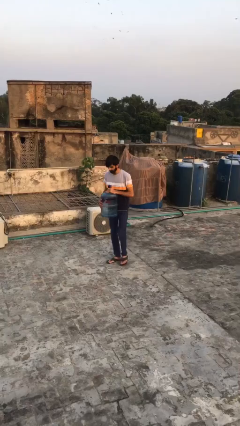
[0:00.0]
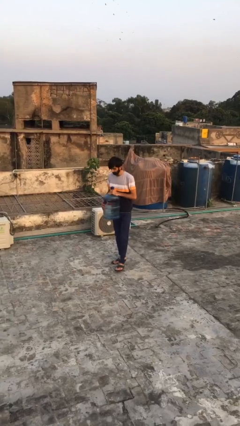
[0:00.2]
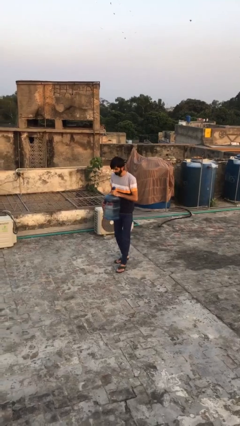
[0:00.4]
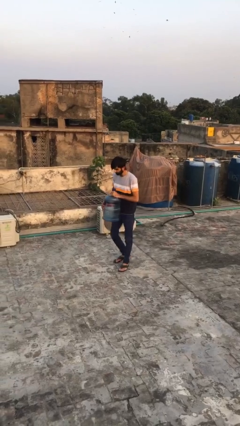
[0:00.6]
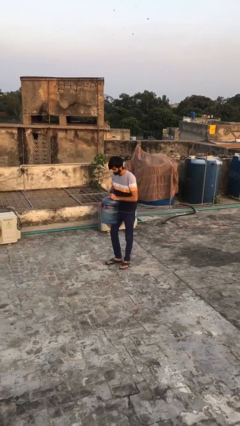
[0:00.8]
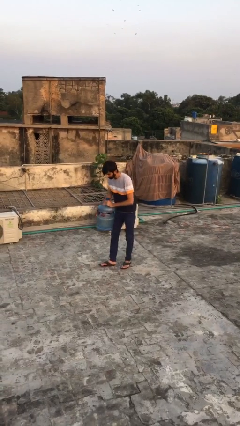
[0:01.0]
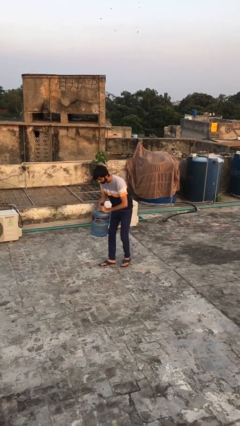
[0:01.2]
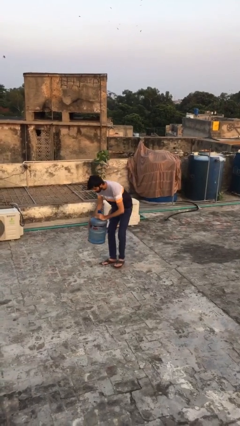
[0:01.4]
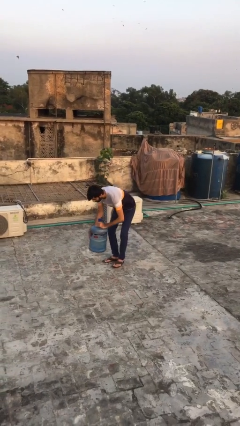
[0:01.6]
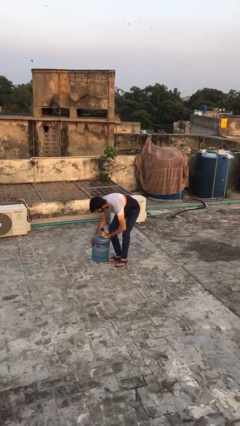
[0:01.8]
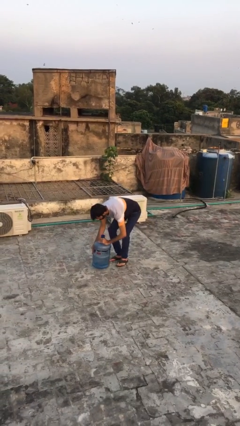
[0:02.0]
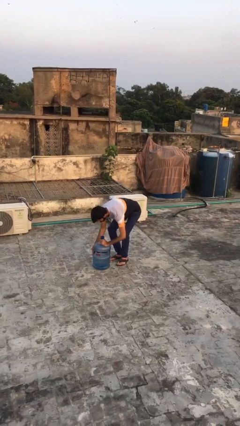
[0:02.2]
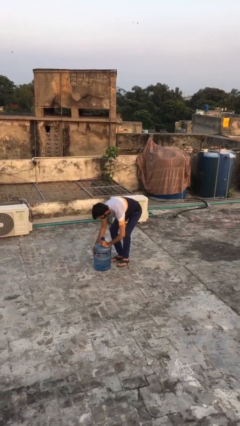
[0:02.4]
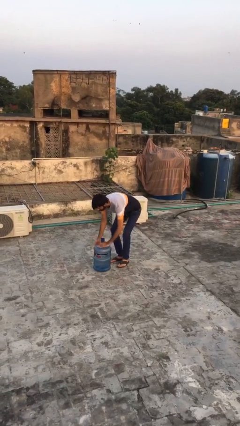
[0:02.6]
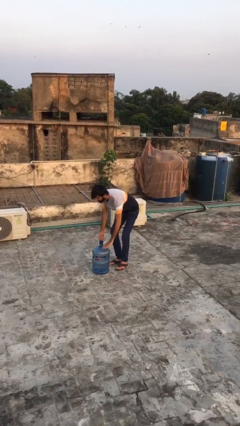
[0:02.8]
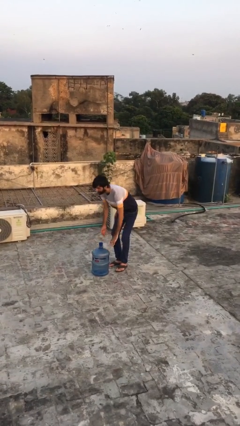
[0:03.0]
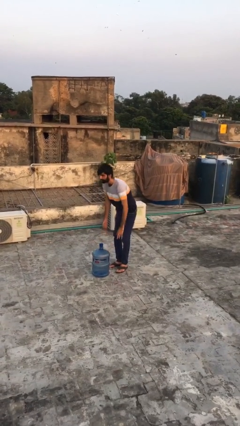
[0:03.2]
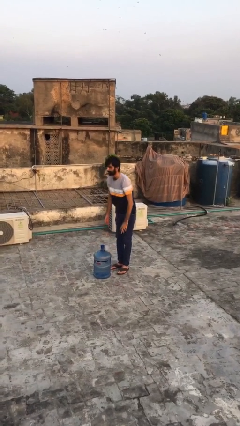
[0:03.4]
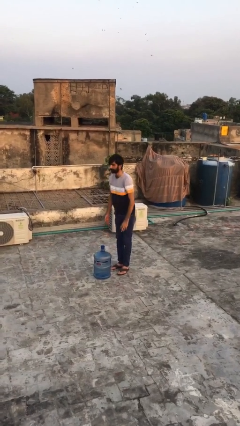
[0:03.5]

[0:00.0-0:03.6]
person puts down object on floor

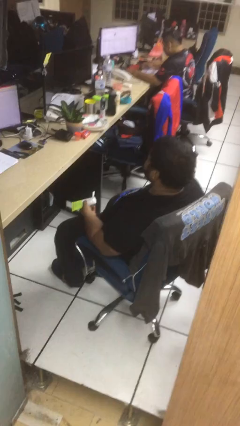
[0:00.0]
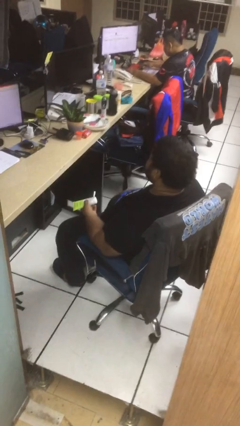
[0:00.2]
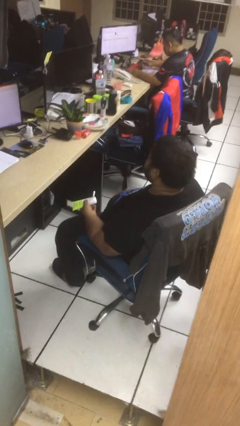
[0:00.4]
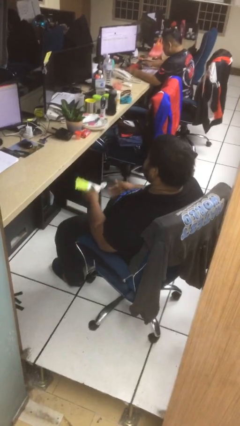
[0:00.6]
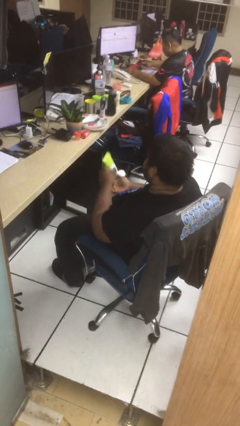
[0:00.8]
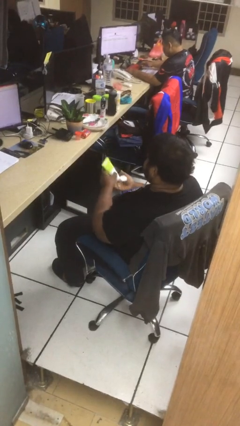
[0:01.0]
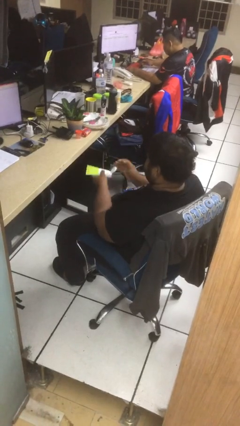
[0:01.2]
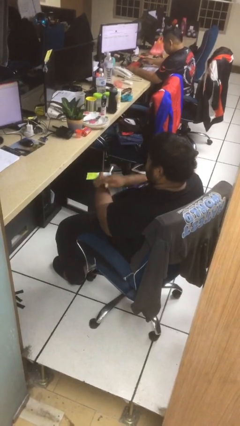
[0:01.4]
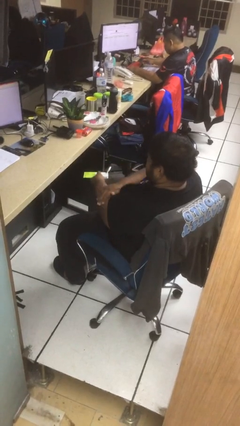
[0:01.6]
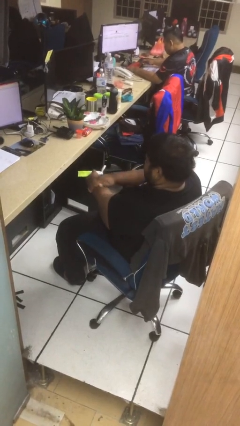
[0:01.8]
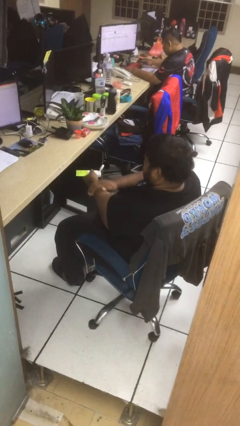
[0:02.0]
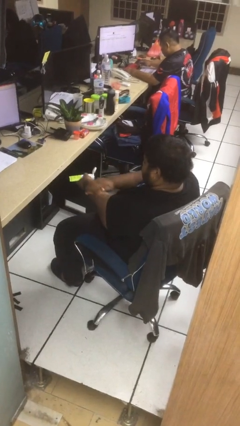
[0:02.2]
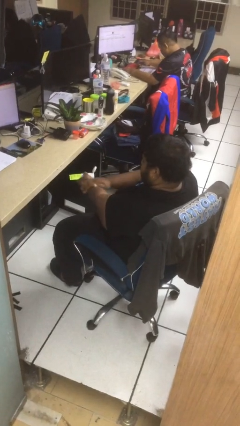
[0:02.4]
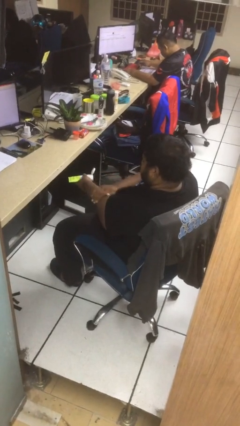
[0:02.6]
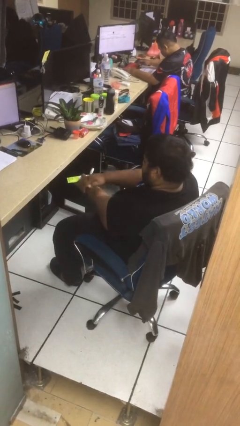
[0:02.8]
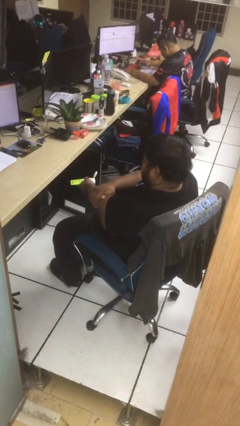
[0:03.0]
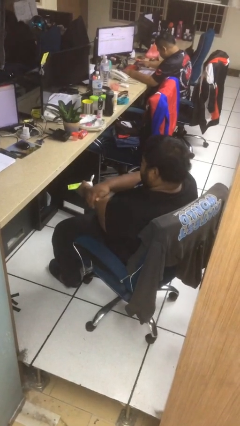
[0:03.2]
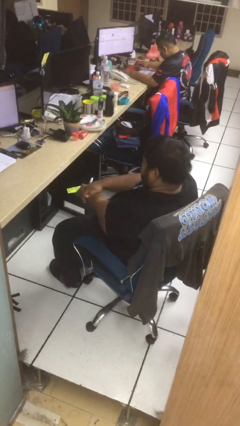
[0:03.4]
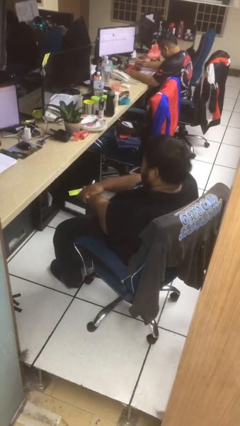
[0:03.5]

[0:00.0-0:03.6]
person applies sunscreen

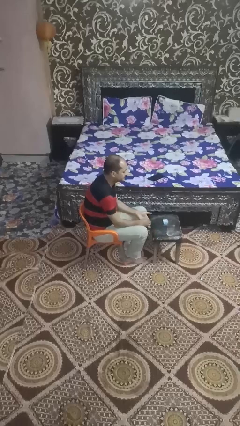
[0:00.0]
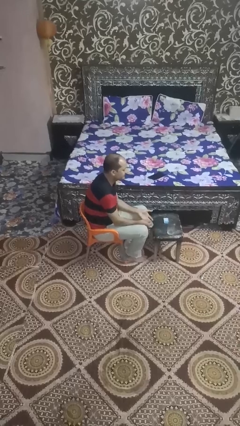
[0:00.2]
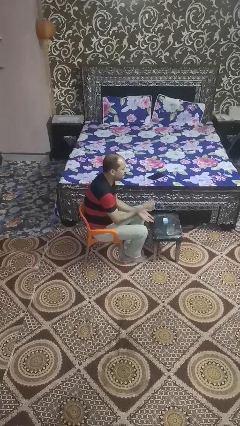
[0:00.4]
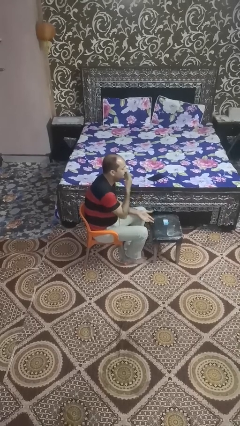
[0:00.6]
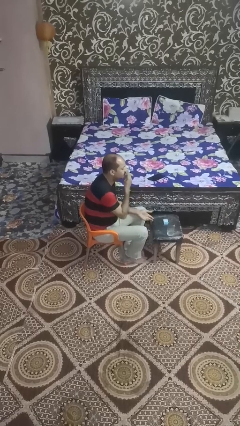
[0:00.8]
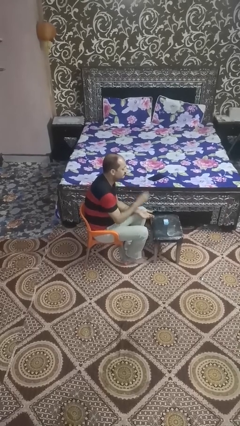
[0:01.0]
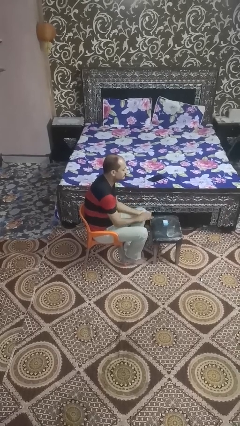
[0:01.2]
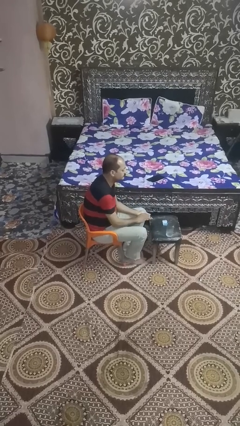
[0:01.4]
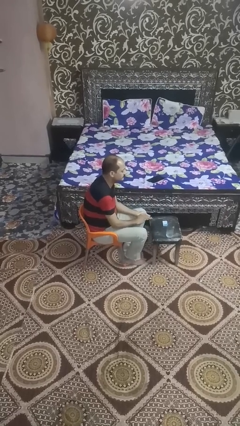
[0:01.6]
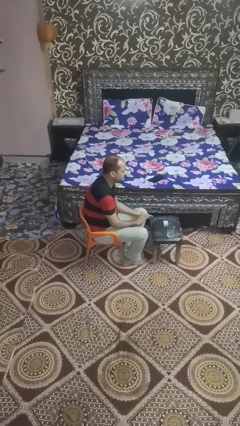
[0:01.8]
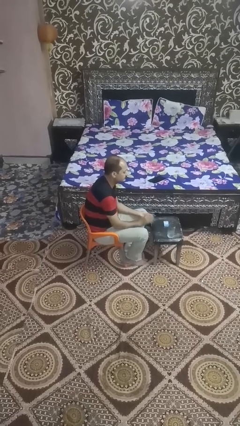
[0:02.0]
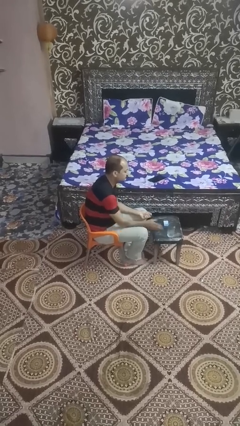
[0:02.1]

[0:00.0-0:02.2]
person spills on table

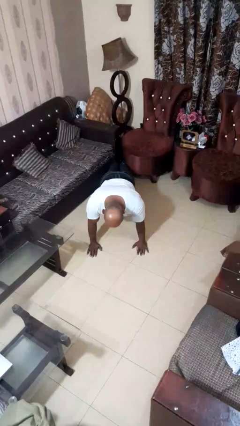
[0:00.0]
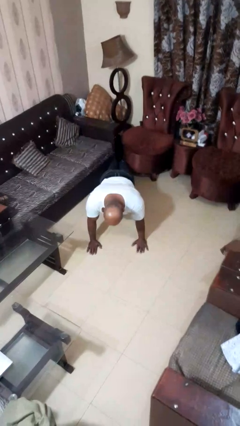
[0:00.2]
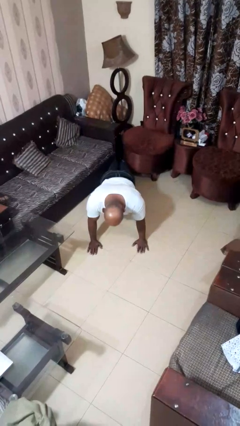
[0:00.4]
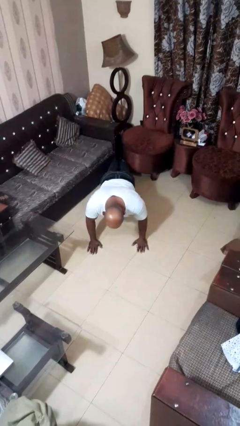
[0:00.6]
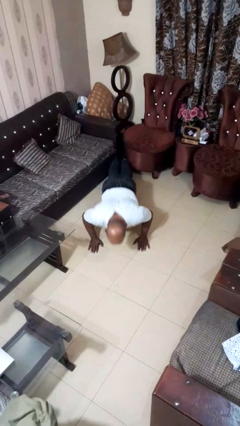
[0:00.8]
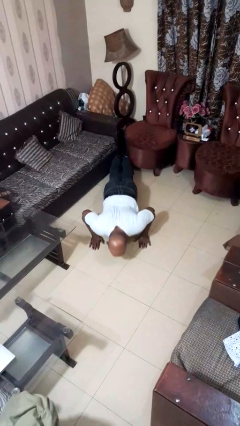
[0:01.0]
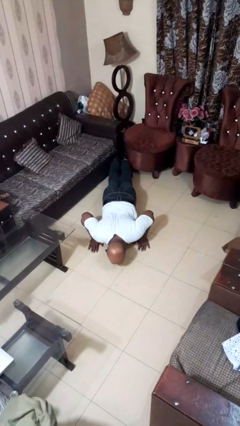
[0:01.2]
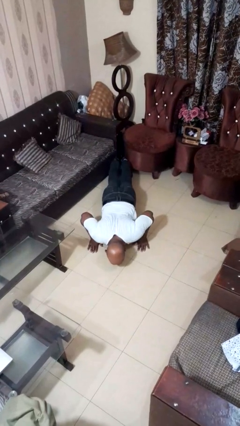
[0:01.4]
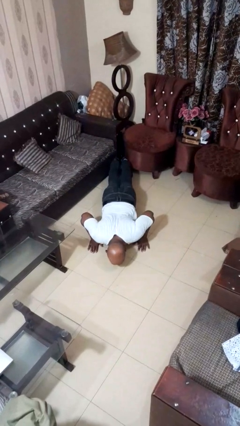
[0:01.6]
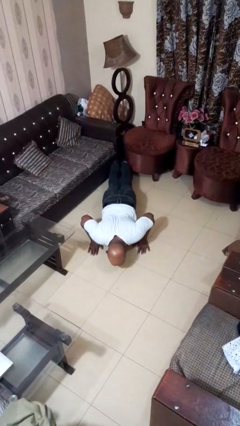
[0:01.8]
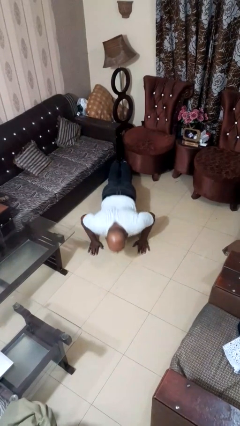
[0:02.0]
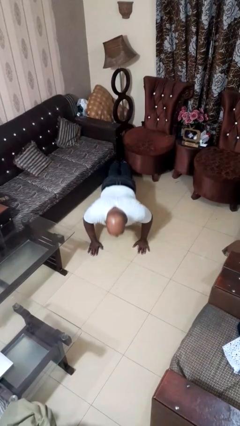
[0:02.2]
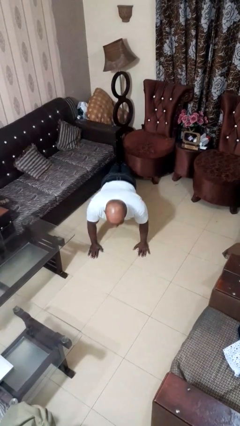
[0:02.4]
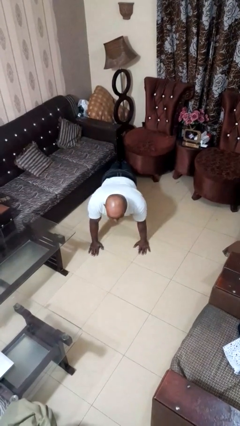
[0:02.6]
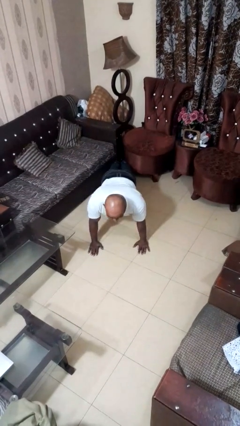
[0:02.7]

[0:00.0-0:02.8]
person exercises with pushup

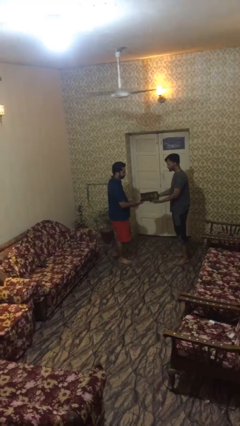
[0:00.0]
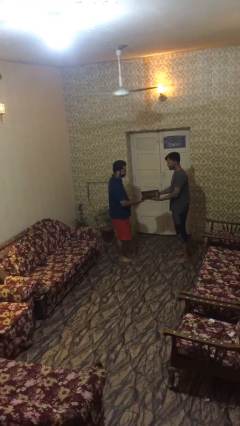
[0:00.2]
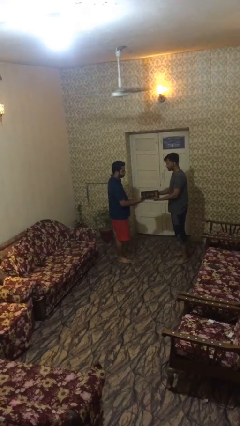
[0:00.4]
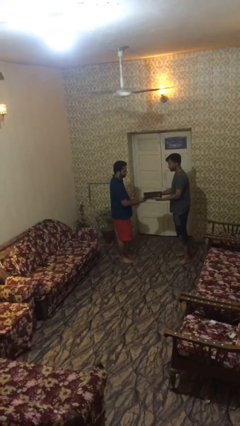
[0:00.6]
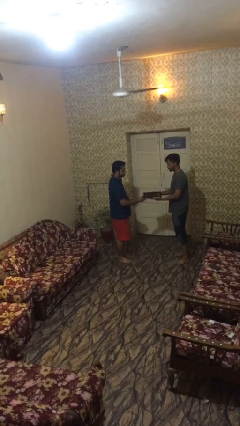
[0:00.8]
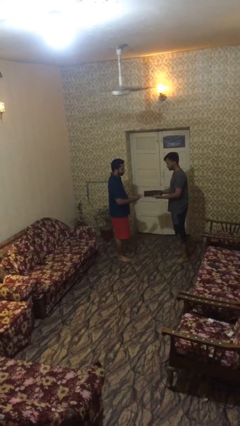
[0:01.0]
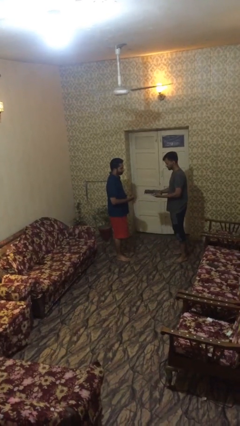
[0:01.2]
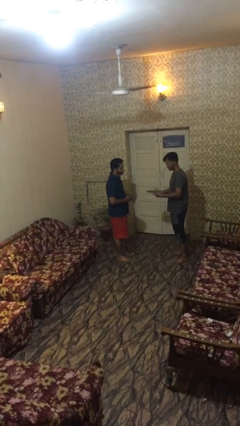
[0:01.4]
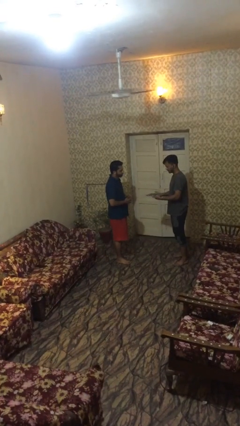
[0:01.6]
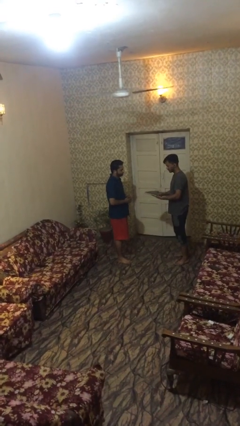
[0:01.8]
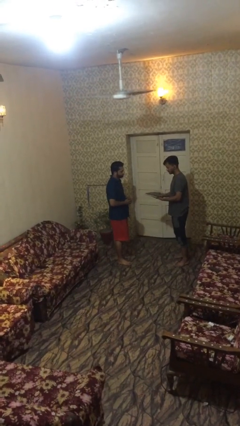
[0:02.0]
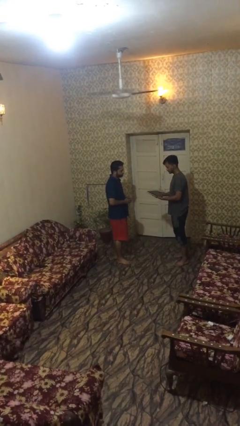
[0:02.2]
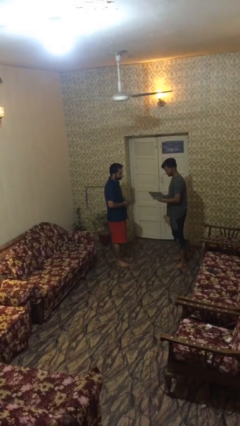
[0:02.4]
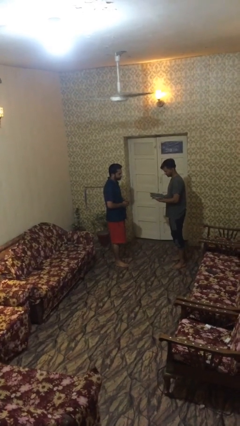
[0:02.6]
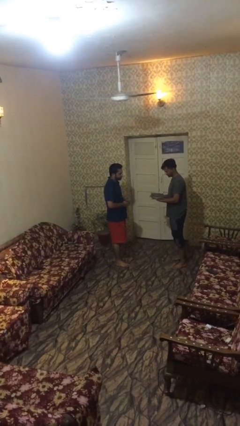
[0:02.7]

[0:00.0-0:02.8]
person transfers object to person

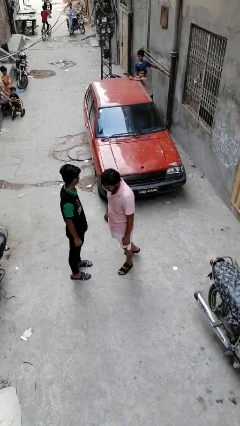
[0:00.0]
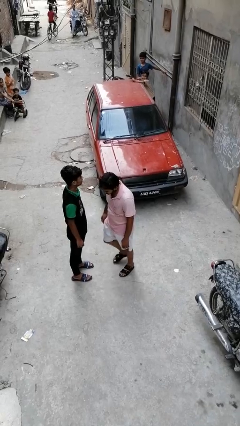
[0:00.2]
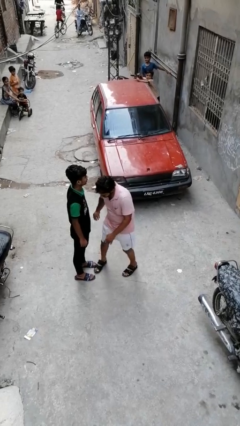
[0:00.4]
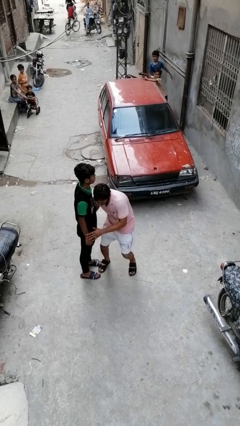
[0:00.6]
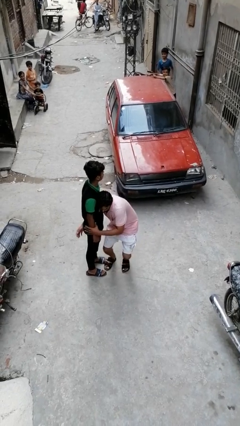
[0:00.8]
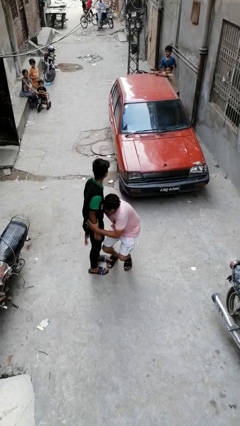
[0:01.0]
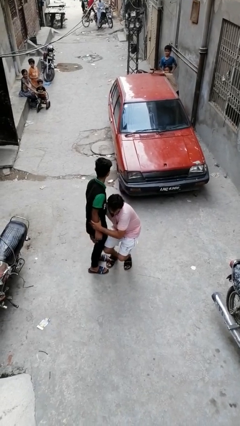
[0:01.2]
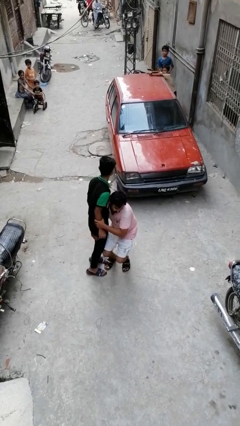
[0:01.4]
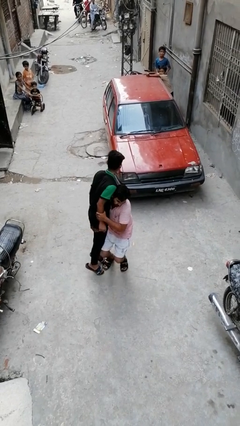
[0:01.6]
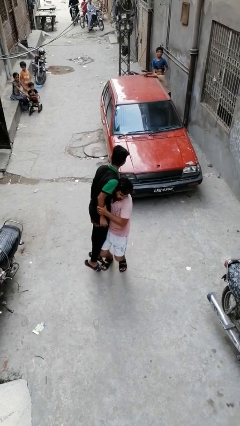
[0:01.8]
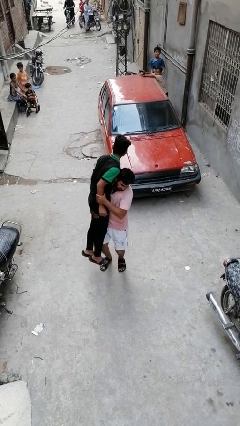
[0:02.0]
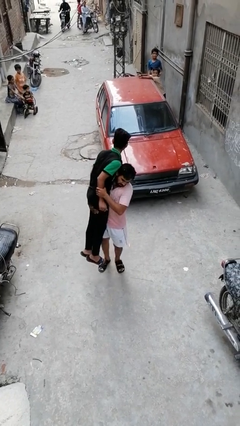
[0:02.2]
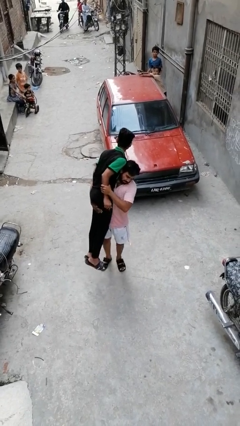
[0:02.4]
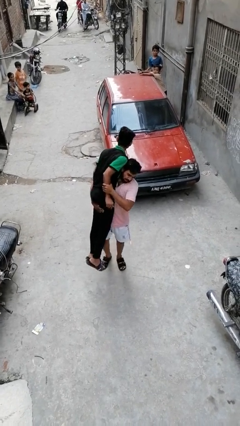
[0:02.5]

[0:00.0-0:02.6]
person picks up person
